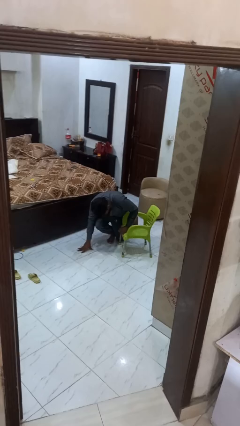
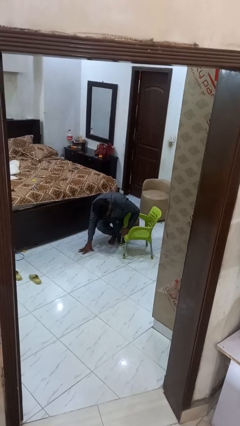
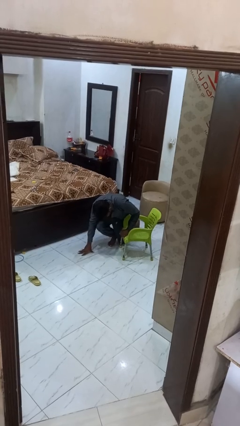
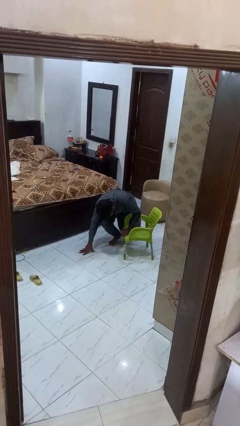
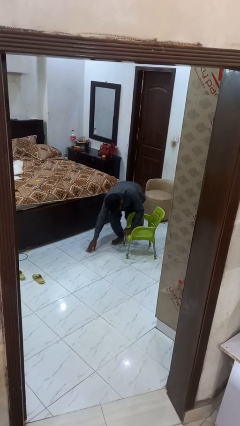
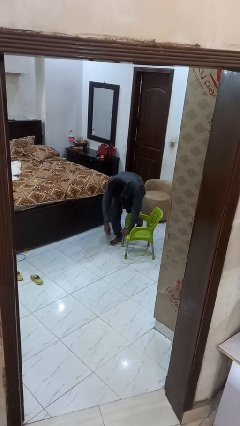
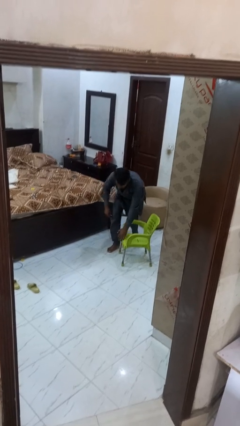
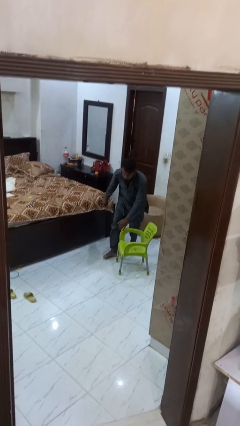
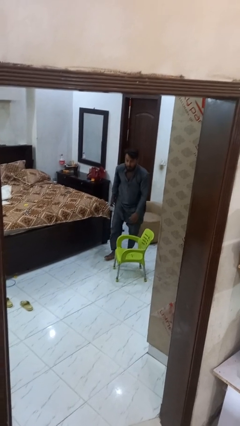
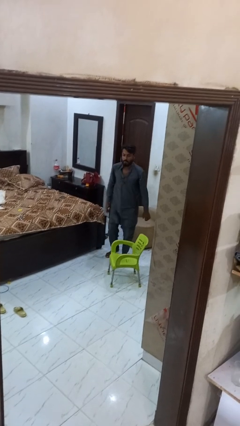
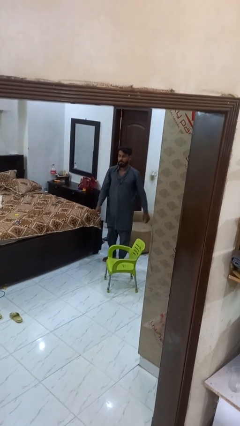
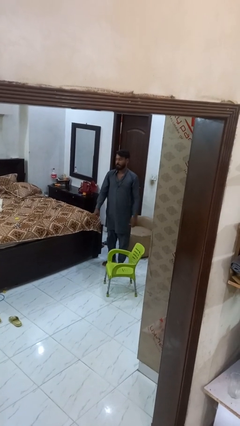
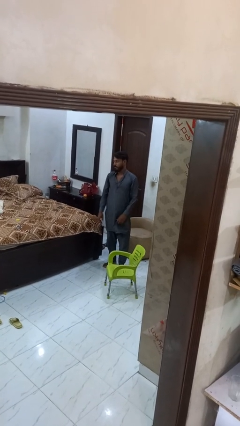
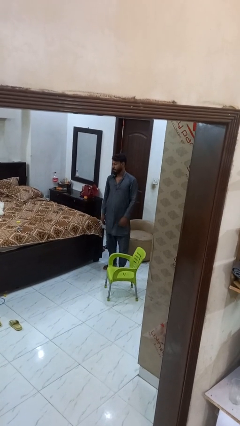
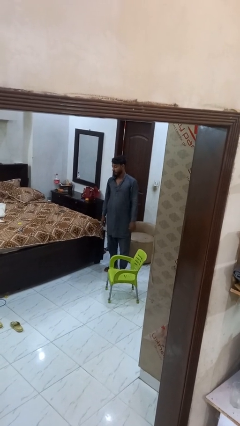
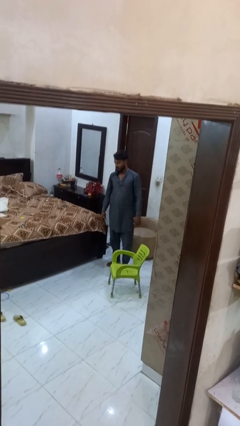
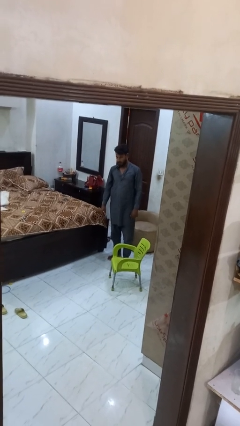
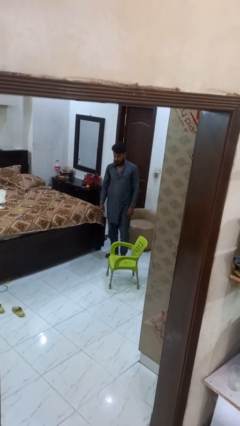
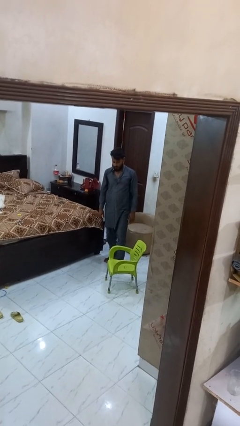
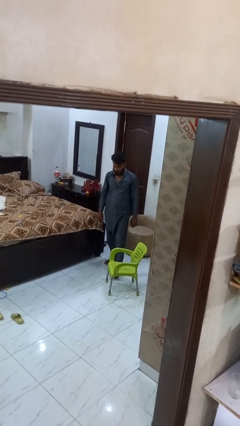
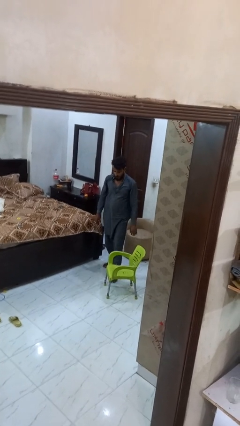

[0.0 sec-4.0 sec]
person stands up from floor

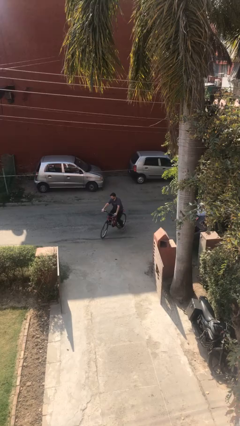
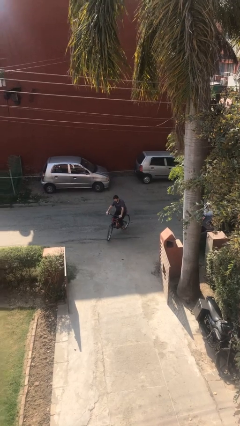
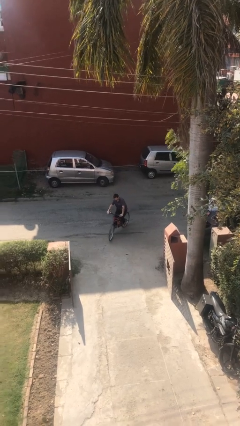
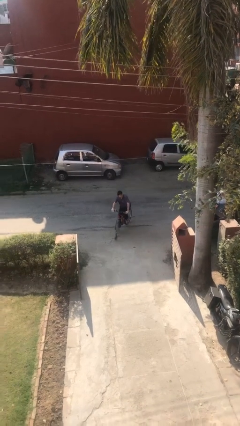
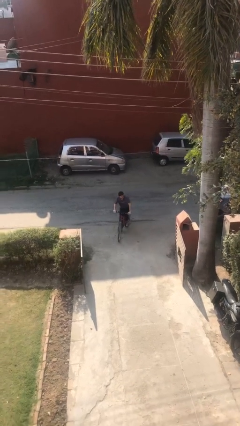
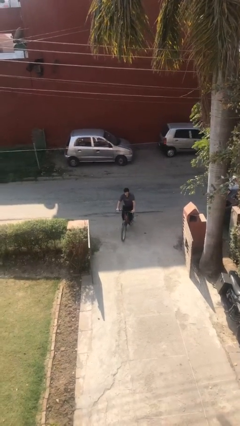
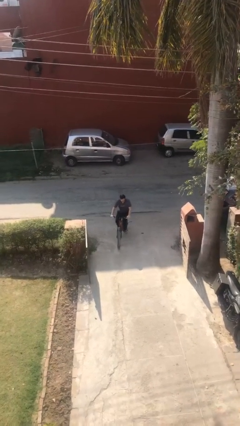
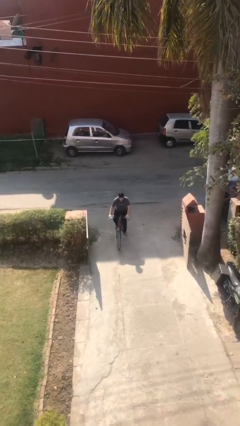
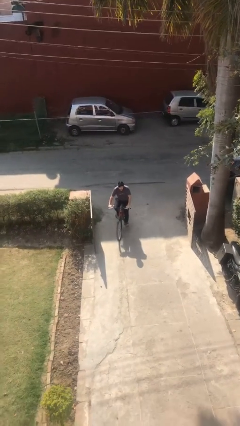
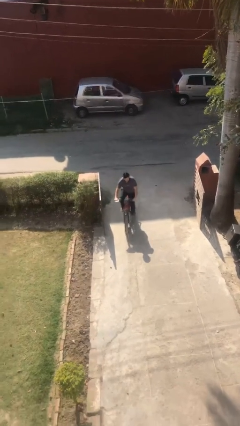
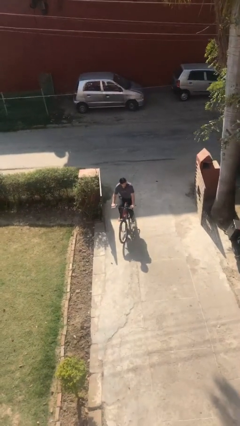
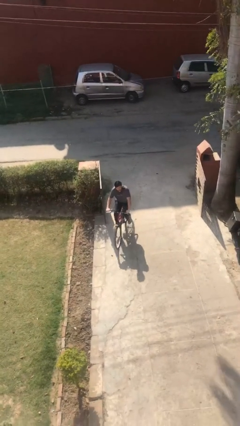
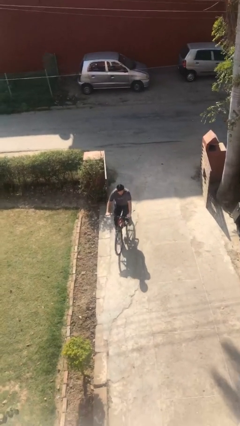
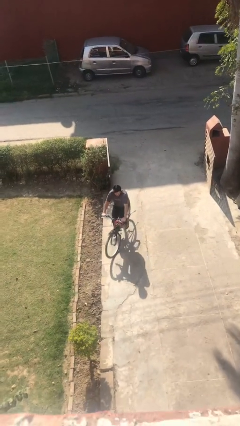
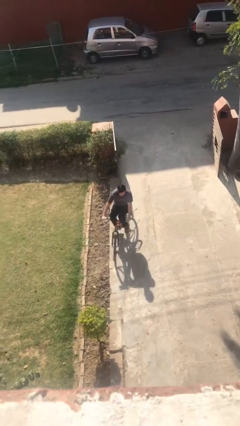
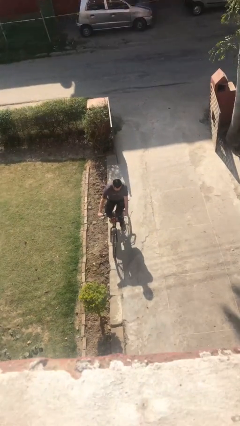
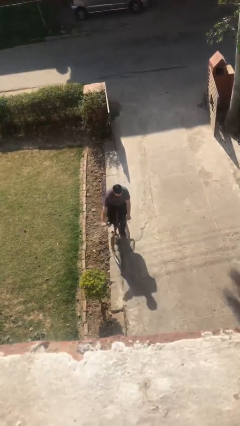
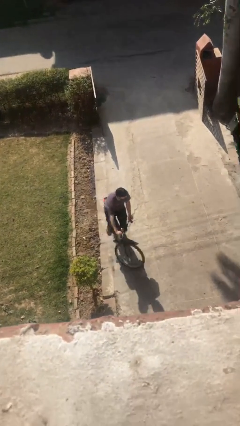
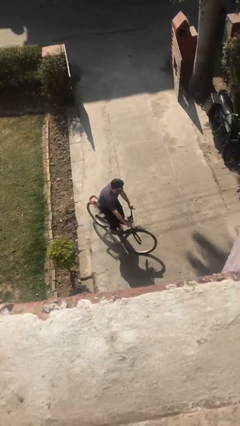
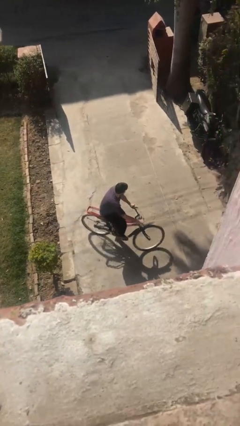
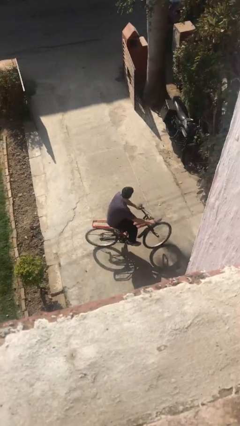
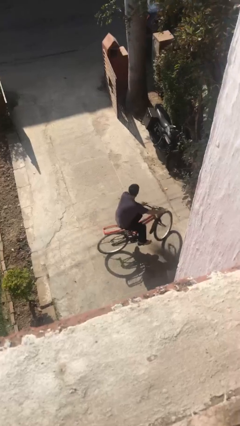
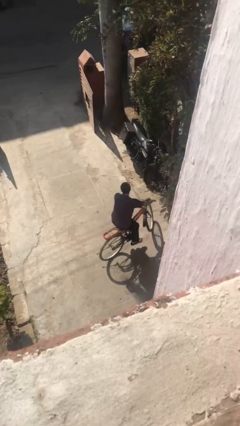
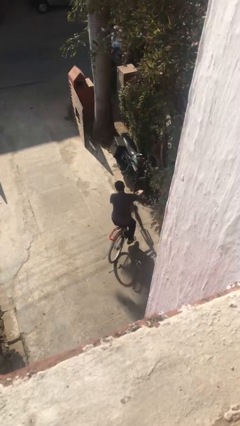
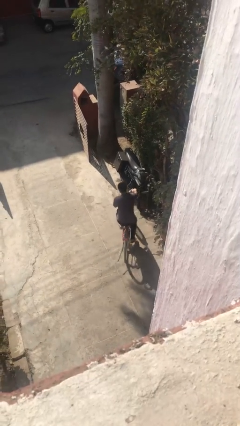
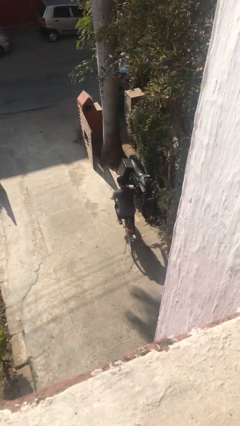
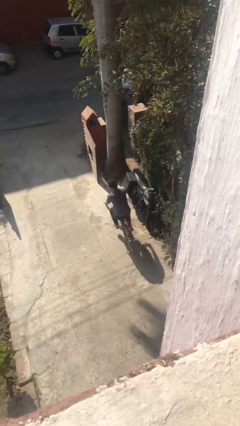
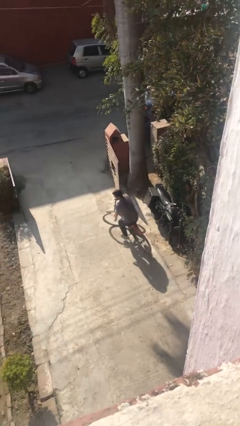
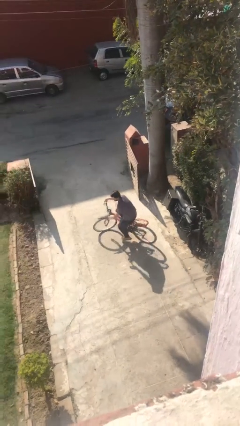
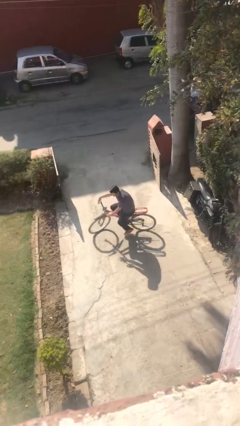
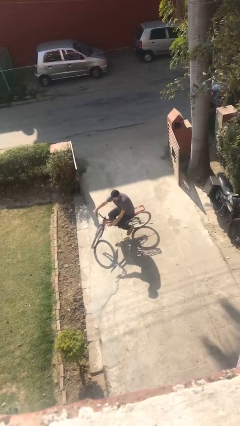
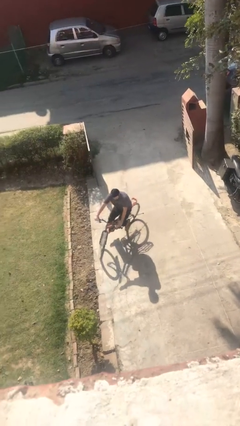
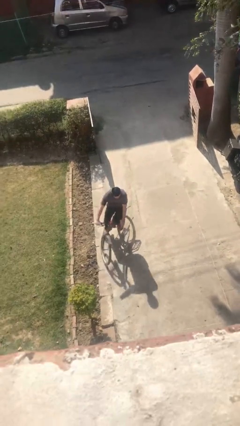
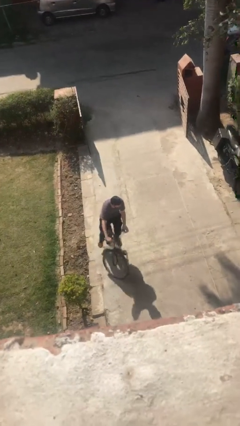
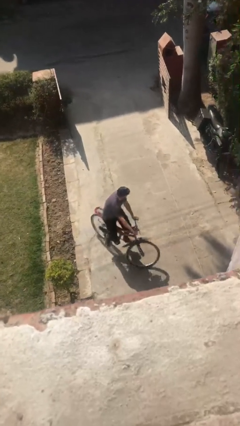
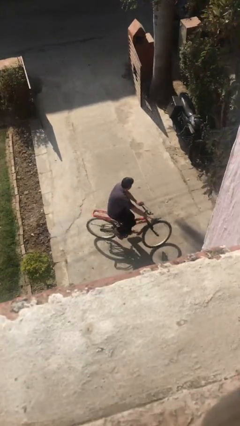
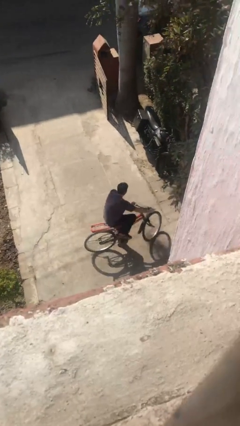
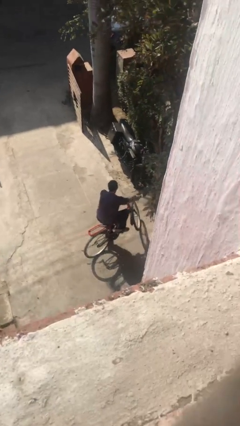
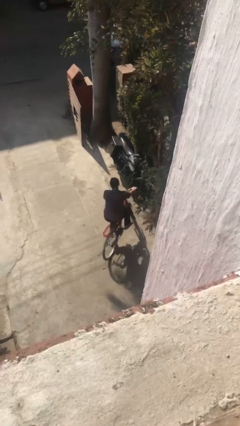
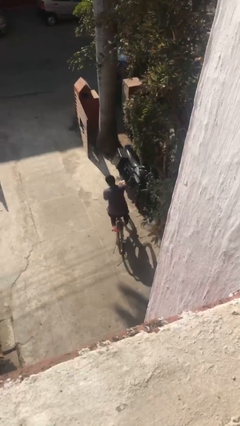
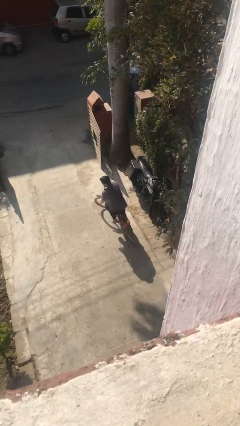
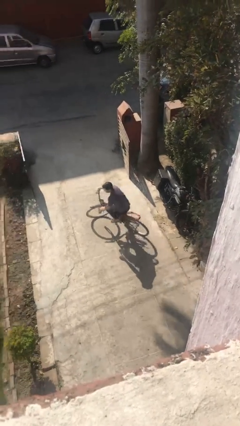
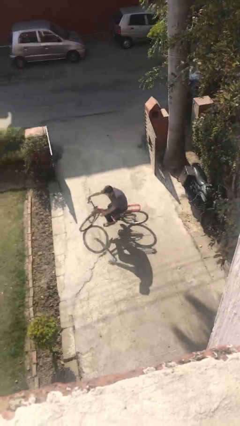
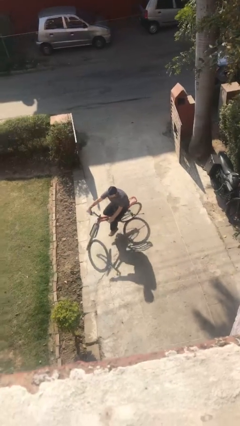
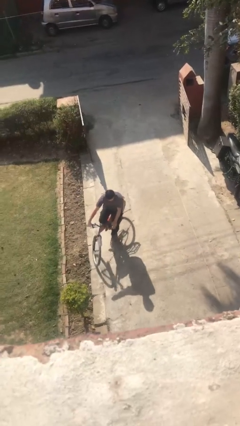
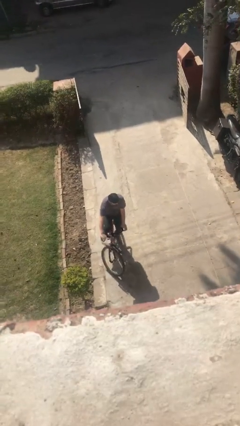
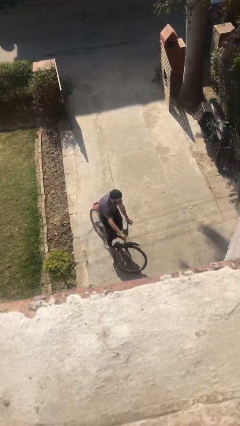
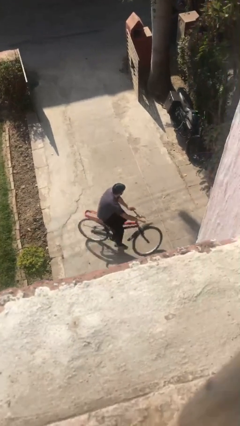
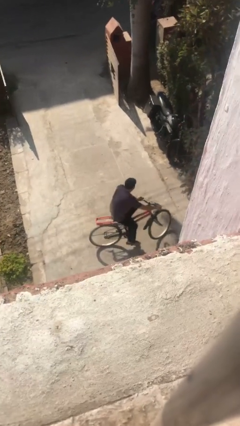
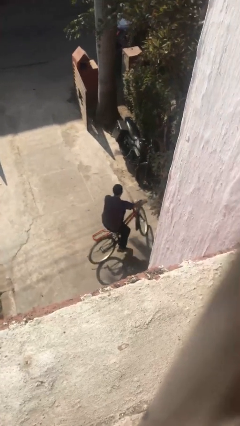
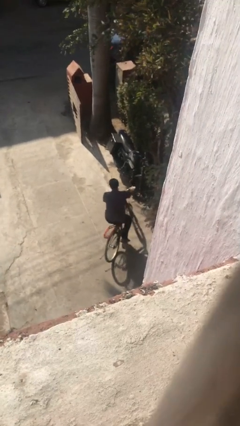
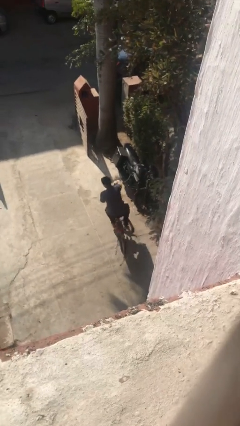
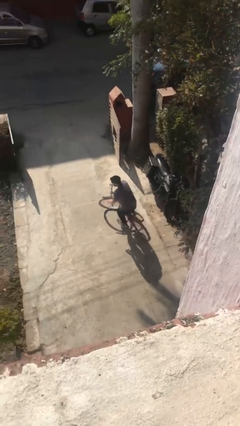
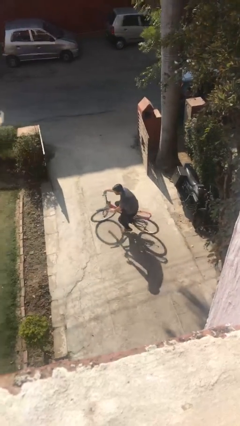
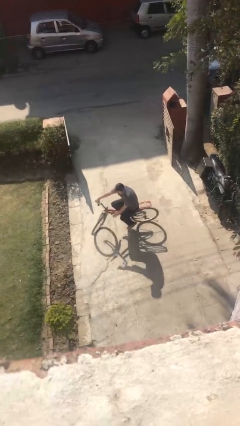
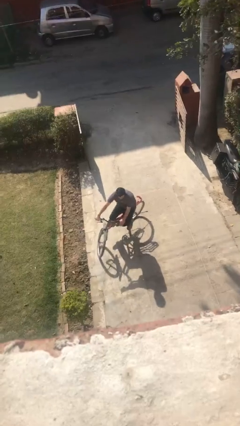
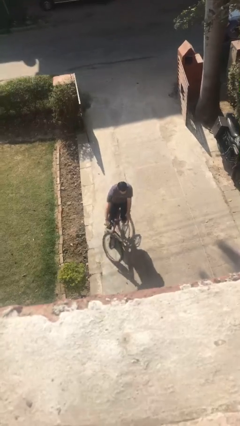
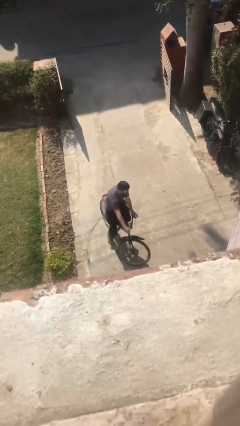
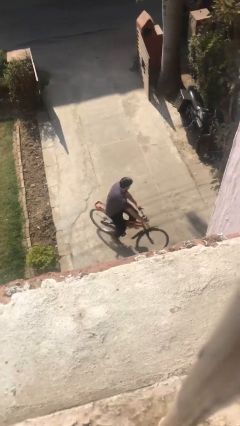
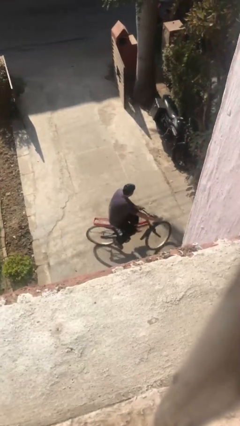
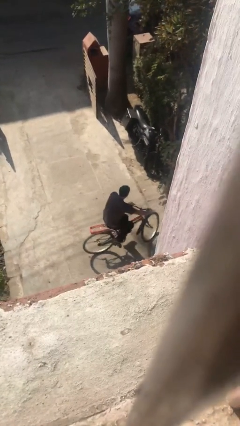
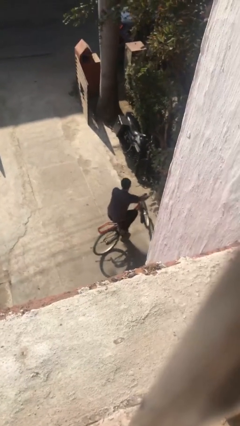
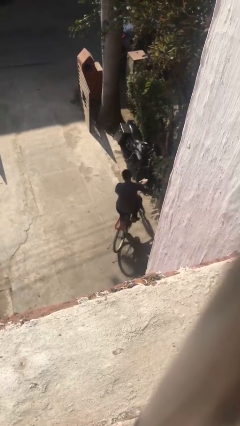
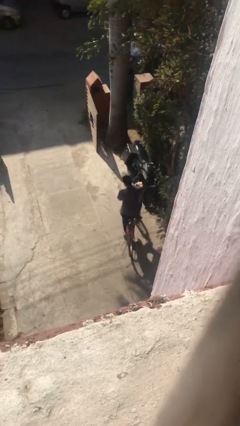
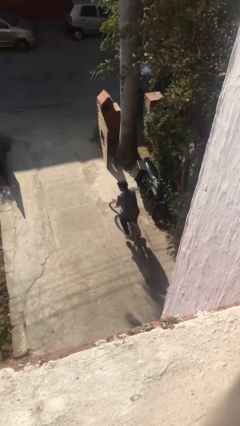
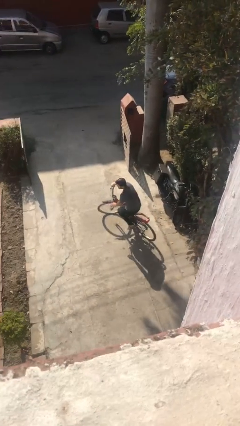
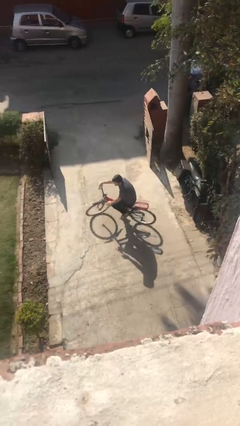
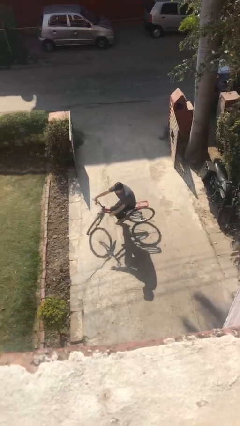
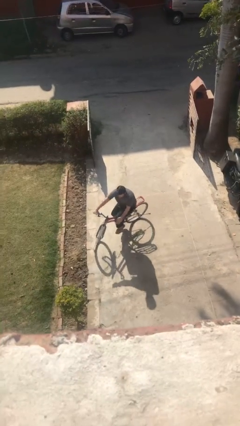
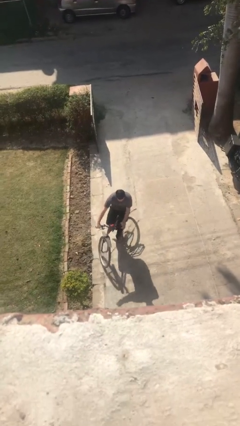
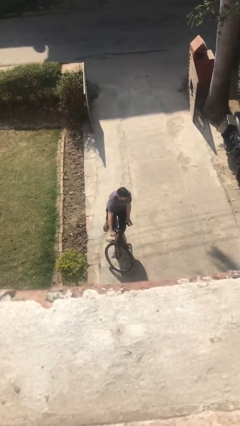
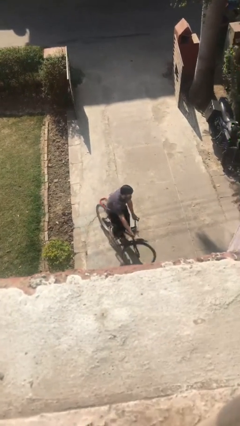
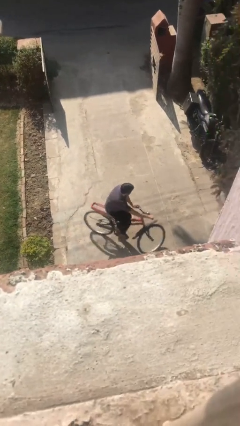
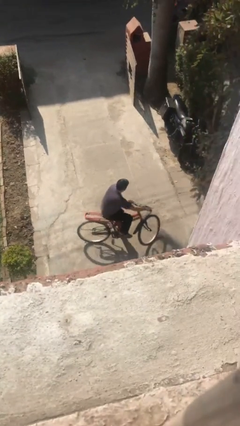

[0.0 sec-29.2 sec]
person rides bicycle
